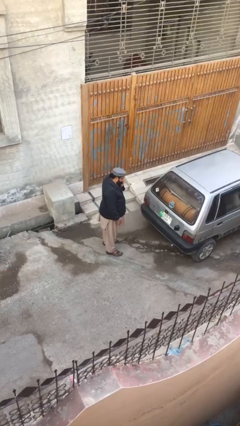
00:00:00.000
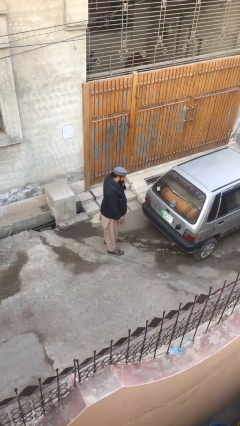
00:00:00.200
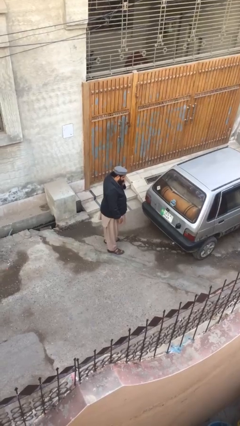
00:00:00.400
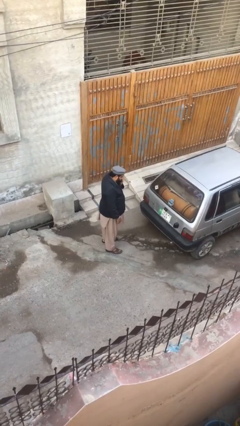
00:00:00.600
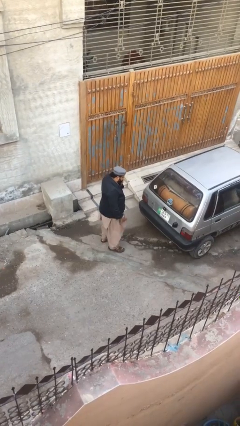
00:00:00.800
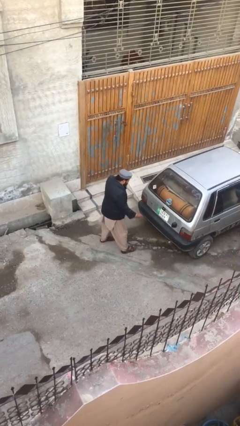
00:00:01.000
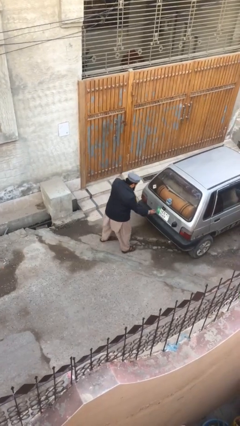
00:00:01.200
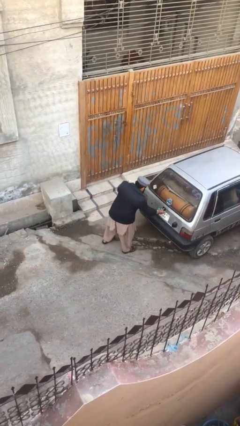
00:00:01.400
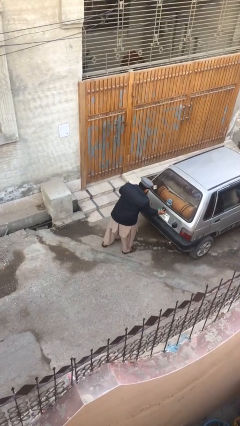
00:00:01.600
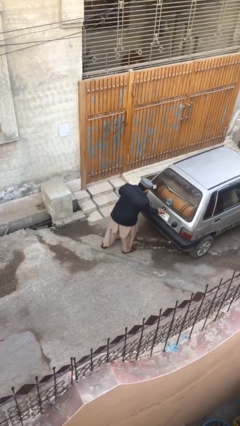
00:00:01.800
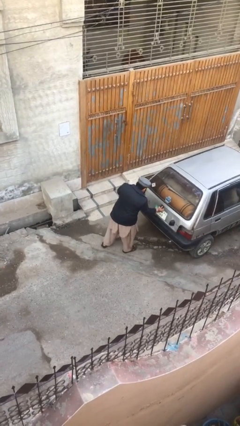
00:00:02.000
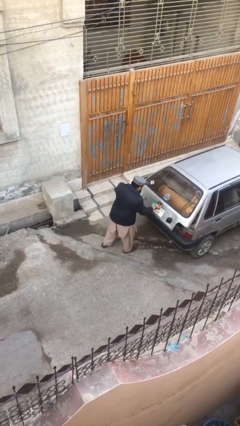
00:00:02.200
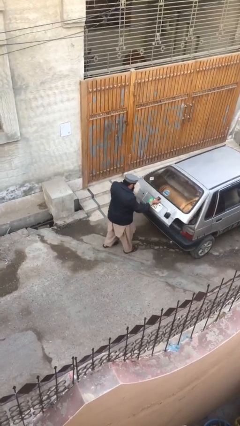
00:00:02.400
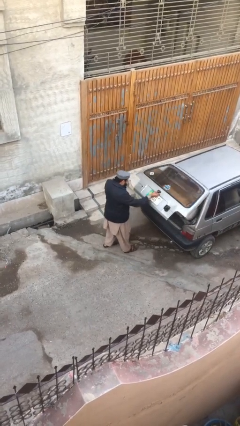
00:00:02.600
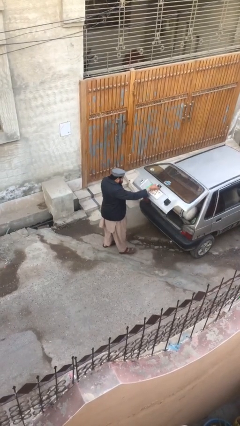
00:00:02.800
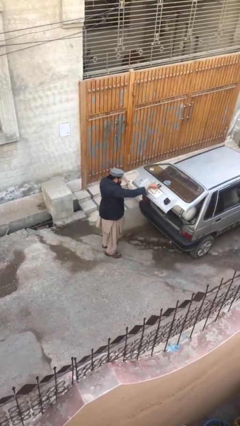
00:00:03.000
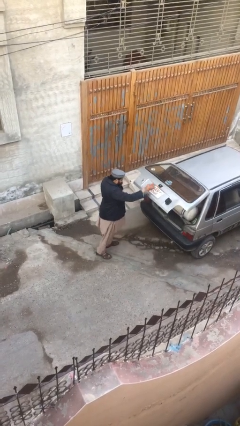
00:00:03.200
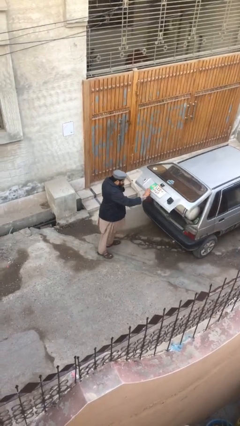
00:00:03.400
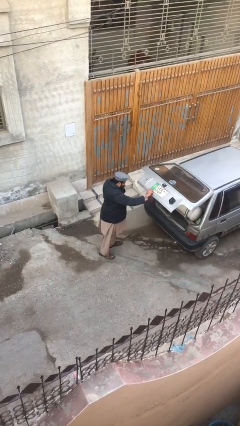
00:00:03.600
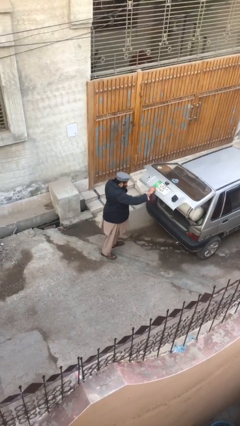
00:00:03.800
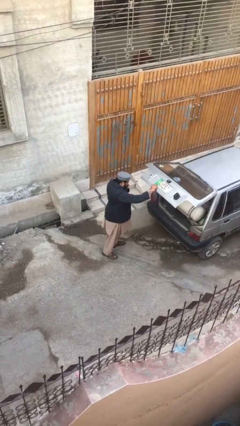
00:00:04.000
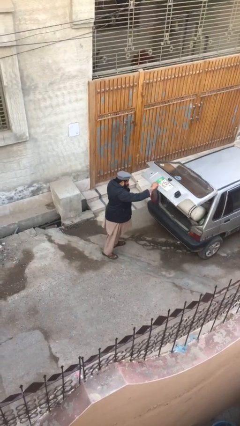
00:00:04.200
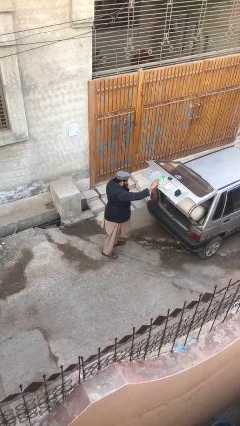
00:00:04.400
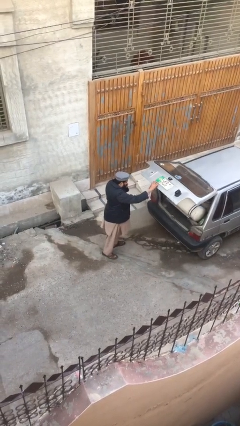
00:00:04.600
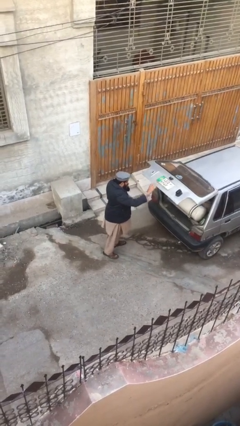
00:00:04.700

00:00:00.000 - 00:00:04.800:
person opens car trunk

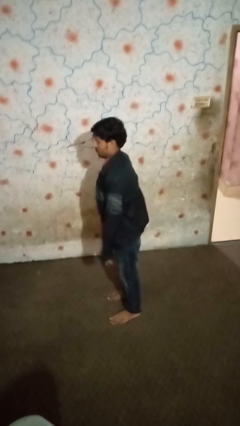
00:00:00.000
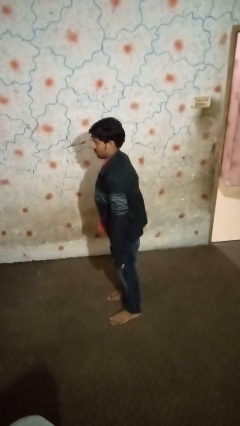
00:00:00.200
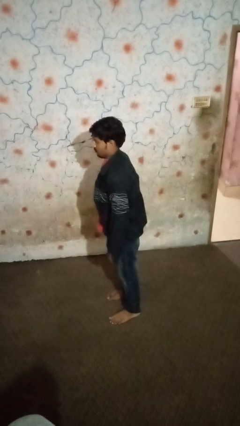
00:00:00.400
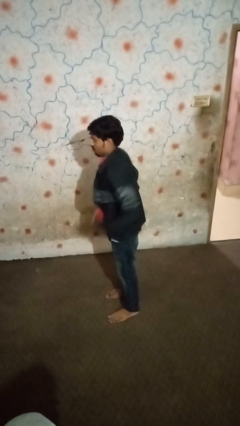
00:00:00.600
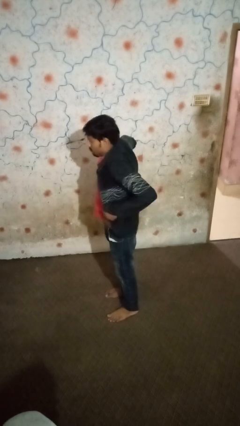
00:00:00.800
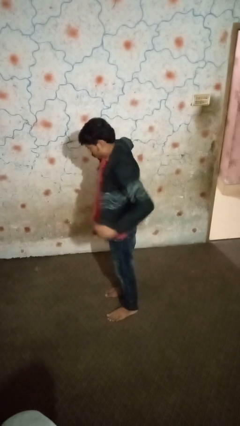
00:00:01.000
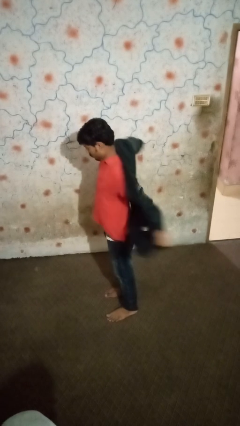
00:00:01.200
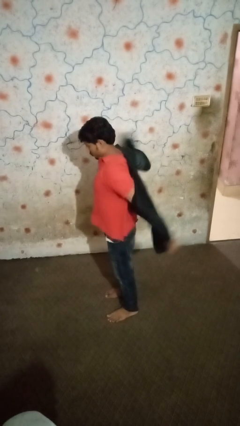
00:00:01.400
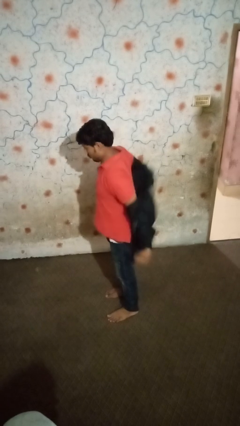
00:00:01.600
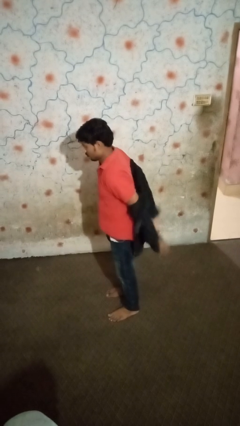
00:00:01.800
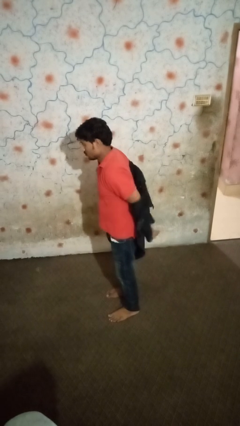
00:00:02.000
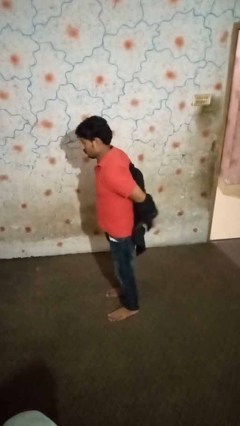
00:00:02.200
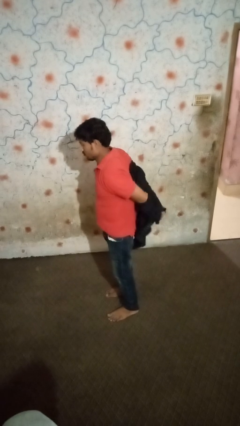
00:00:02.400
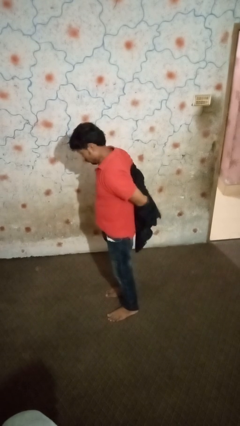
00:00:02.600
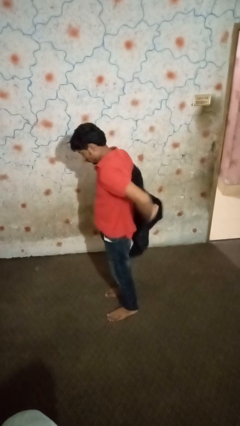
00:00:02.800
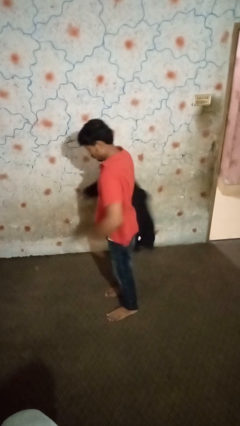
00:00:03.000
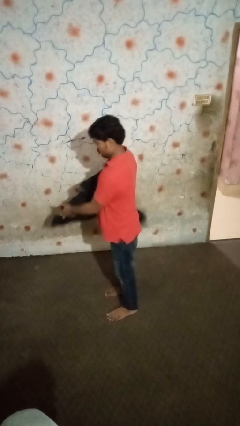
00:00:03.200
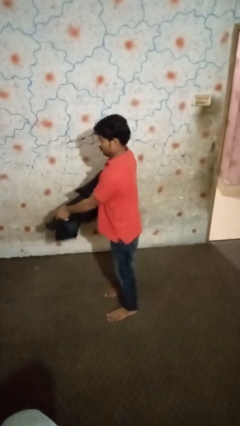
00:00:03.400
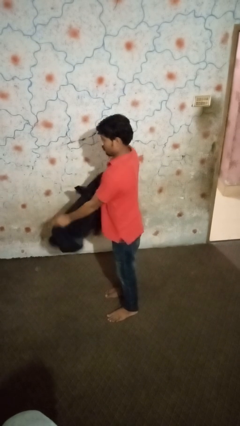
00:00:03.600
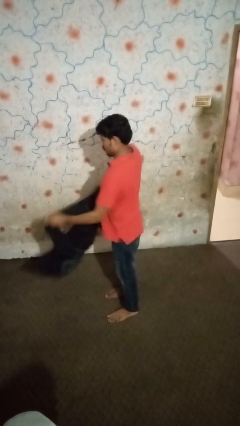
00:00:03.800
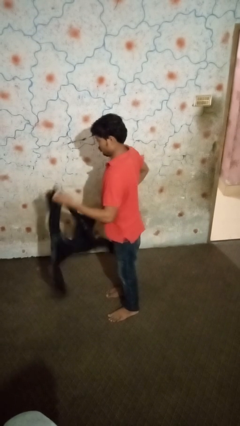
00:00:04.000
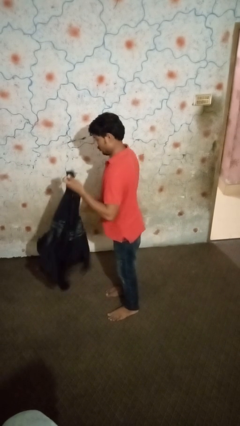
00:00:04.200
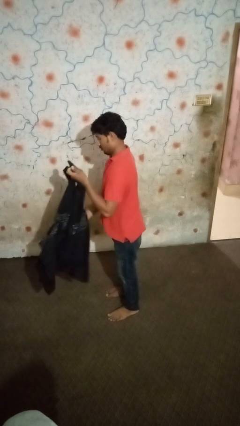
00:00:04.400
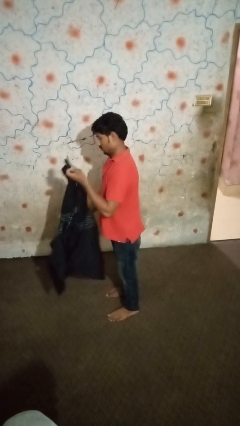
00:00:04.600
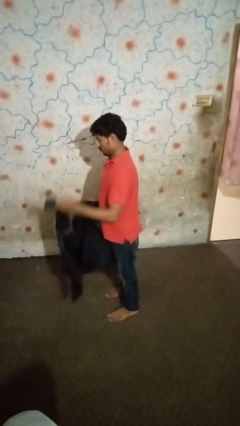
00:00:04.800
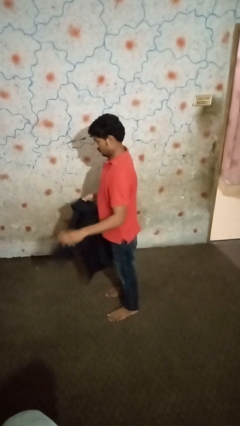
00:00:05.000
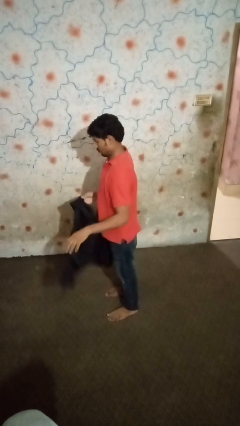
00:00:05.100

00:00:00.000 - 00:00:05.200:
person takes off shirt

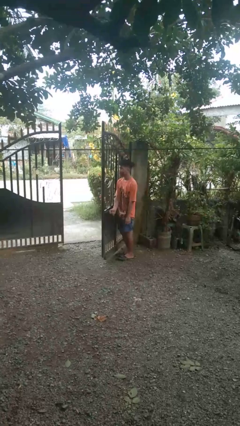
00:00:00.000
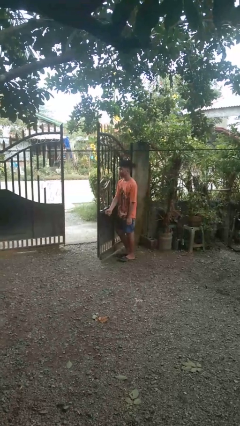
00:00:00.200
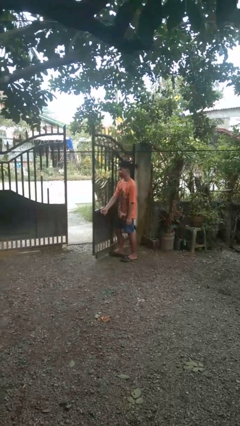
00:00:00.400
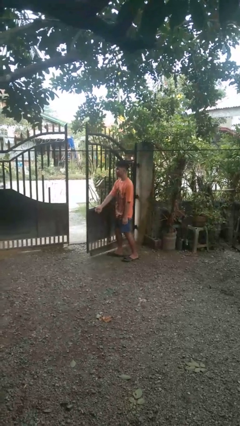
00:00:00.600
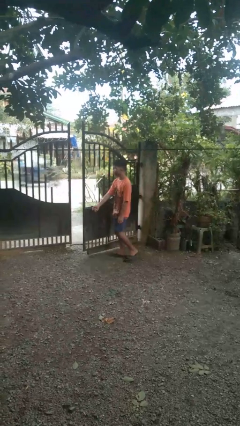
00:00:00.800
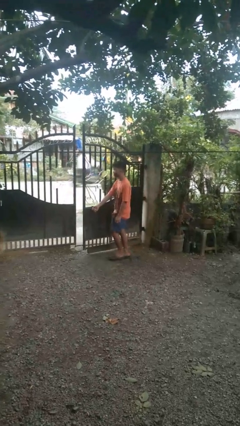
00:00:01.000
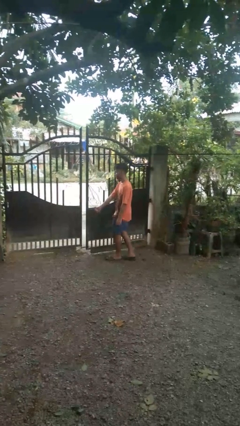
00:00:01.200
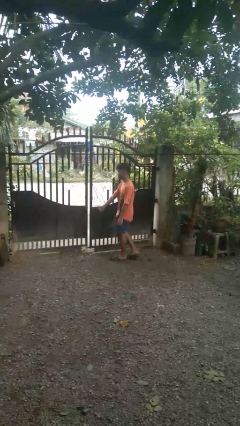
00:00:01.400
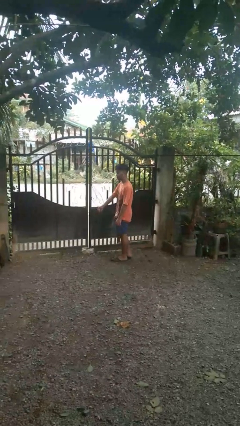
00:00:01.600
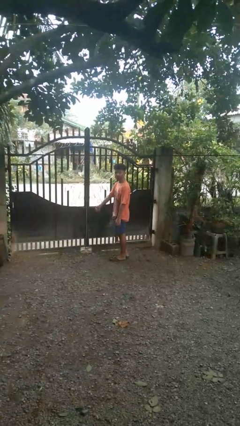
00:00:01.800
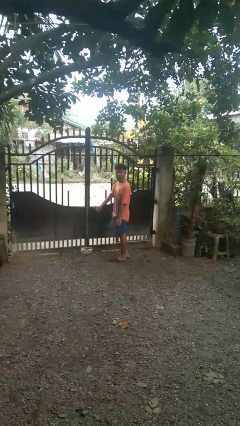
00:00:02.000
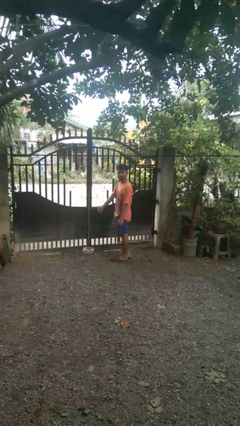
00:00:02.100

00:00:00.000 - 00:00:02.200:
person closes gate

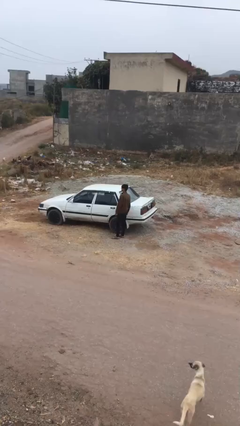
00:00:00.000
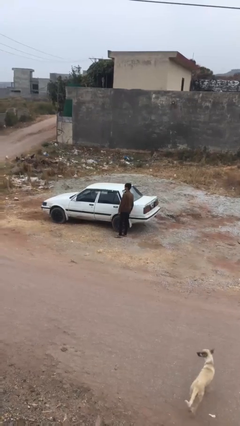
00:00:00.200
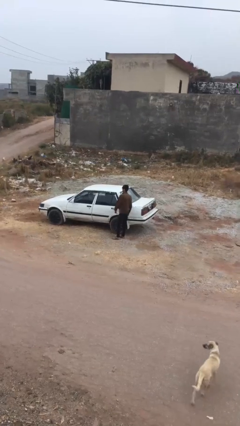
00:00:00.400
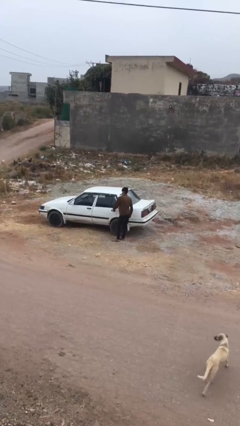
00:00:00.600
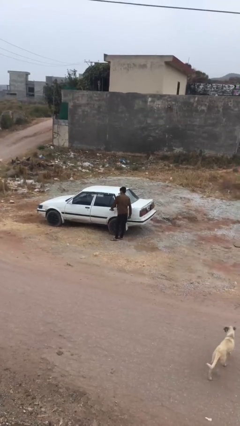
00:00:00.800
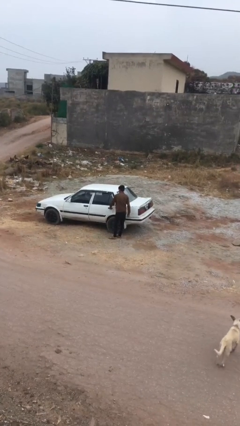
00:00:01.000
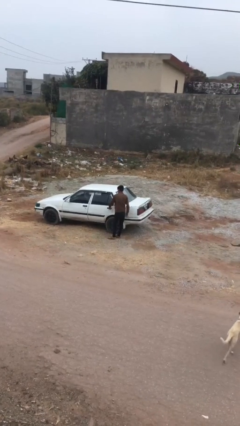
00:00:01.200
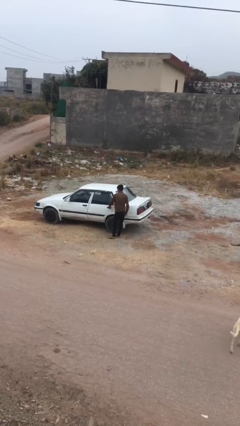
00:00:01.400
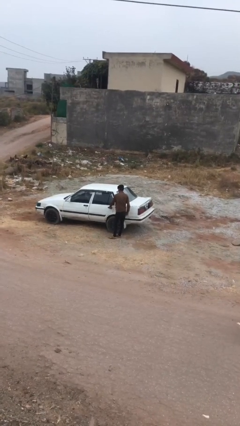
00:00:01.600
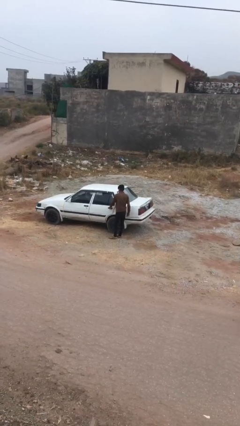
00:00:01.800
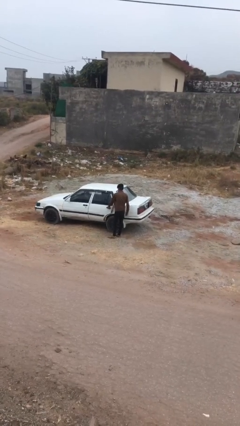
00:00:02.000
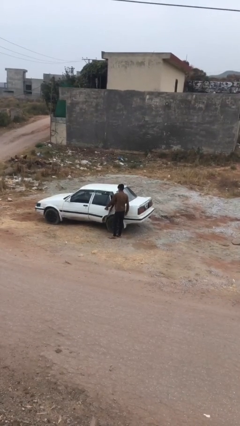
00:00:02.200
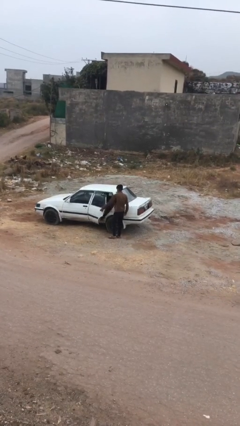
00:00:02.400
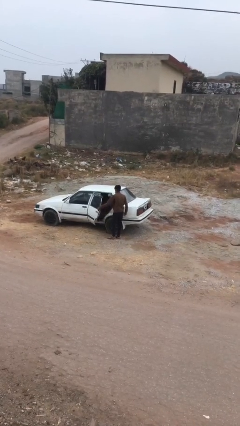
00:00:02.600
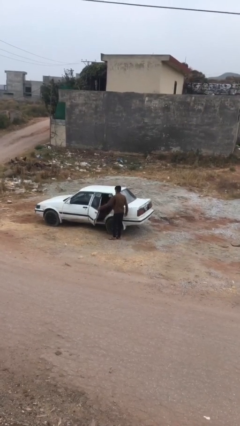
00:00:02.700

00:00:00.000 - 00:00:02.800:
person opens car door

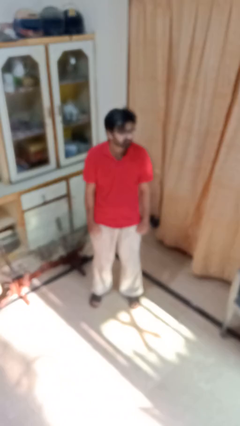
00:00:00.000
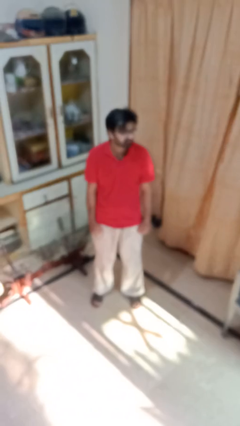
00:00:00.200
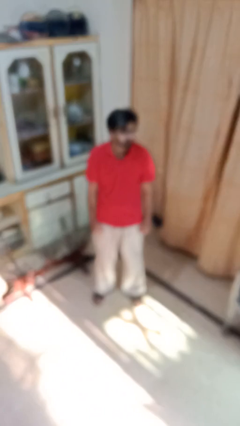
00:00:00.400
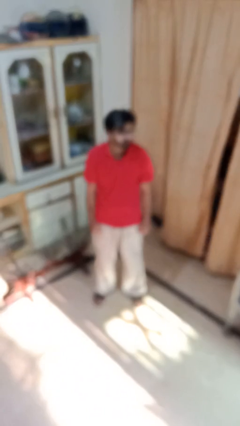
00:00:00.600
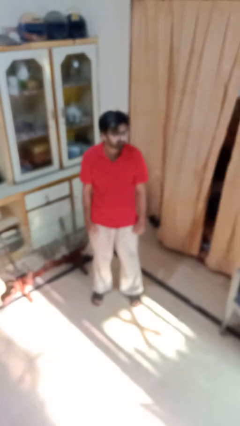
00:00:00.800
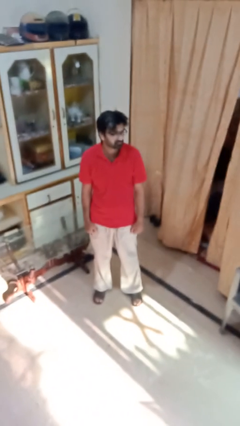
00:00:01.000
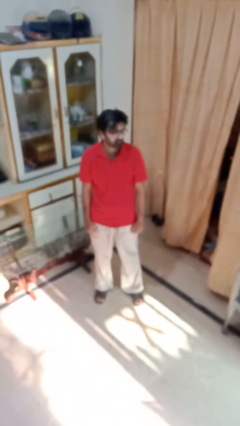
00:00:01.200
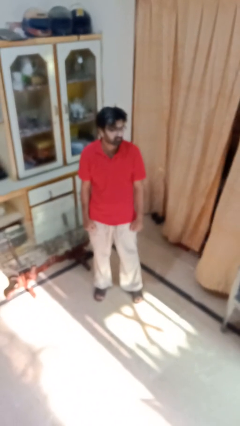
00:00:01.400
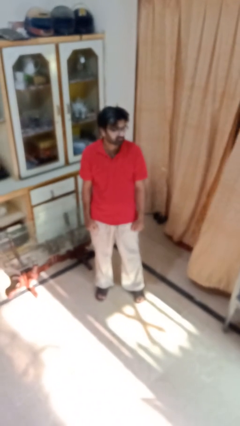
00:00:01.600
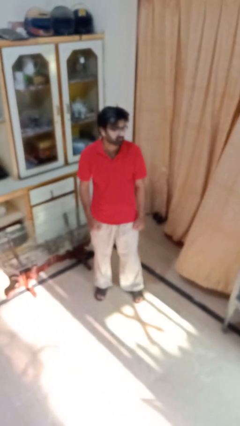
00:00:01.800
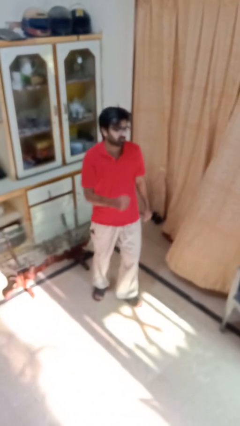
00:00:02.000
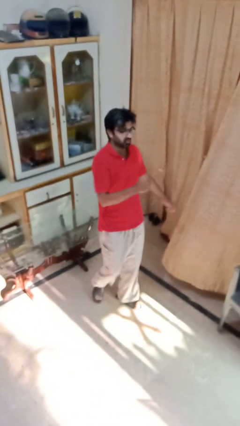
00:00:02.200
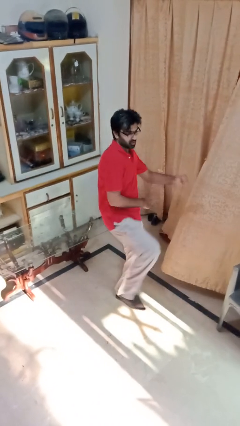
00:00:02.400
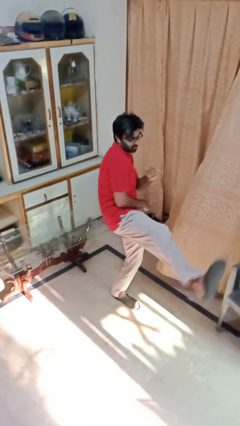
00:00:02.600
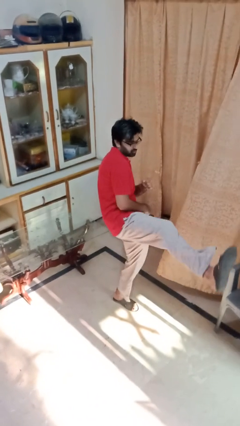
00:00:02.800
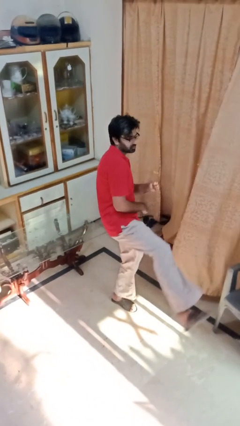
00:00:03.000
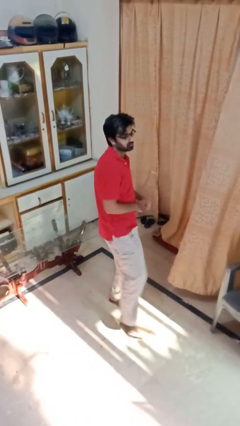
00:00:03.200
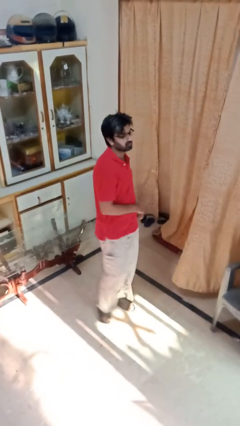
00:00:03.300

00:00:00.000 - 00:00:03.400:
person karate kicks
